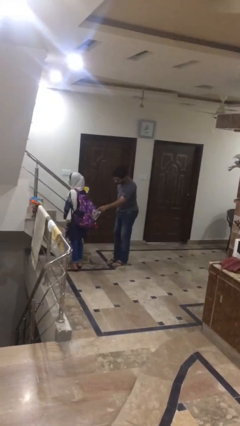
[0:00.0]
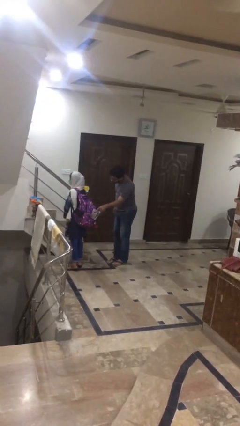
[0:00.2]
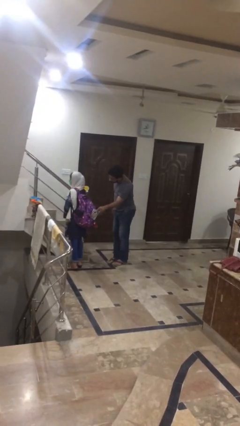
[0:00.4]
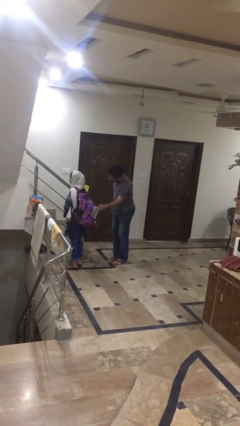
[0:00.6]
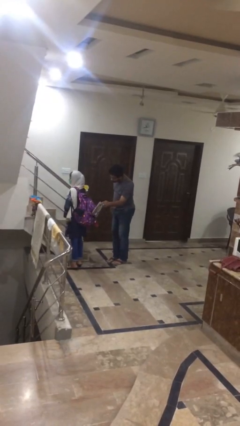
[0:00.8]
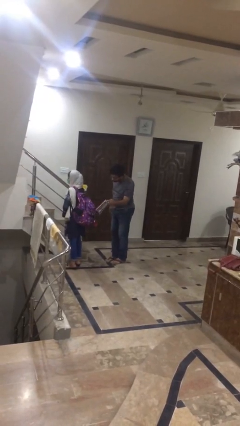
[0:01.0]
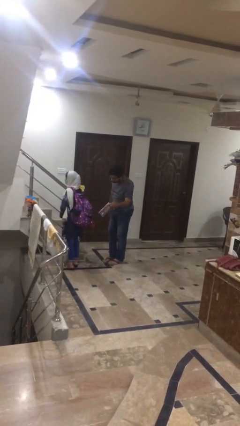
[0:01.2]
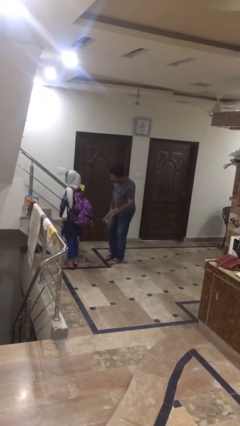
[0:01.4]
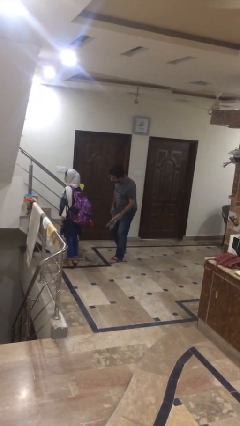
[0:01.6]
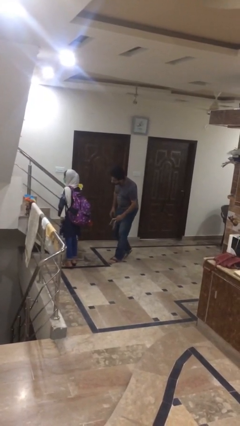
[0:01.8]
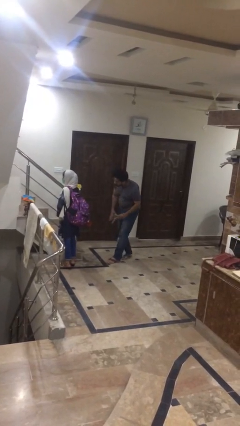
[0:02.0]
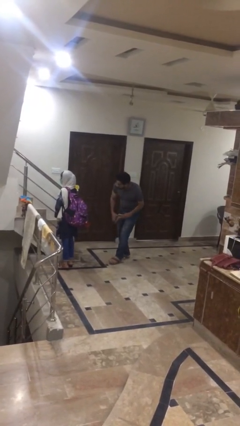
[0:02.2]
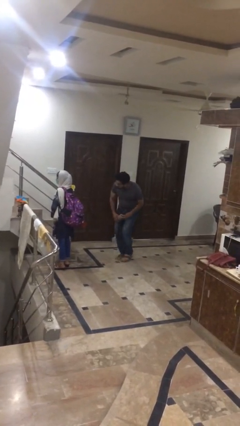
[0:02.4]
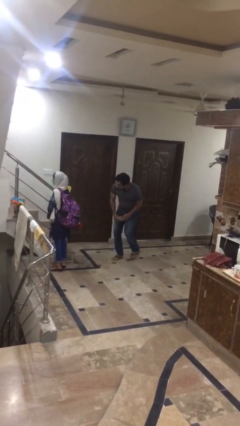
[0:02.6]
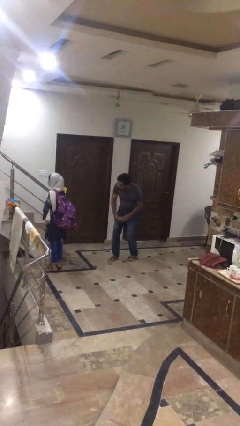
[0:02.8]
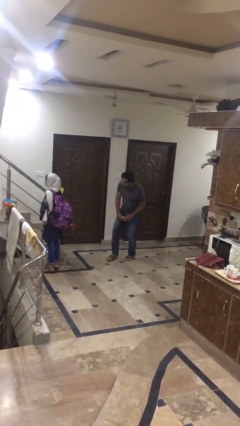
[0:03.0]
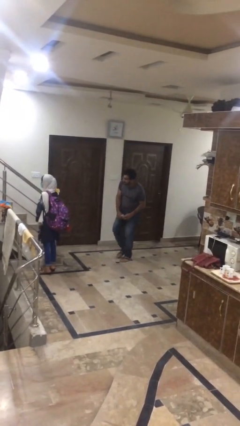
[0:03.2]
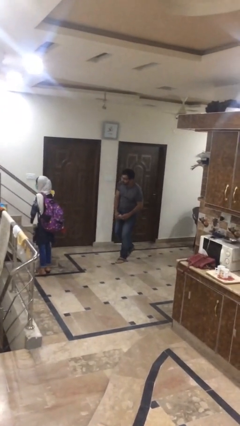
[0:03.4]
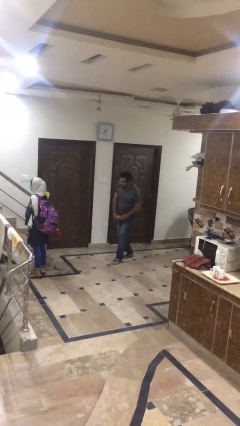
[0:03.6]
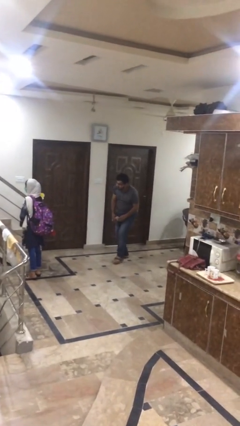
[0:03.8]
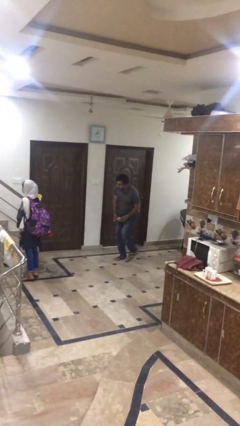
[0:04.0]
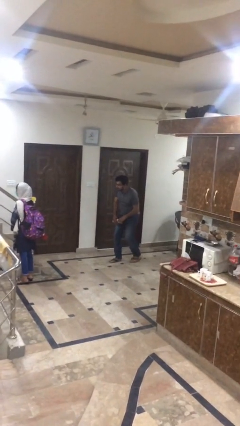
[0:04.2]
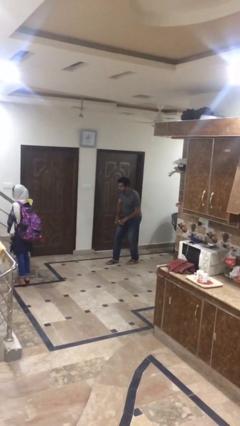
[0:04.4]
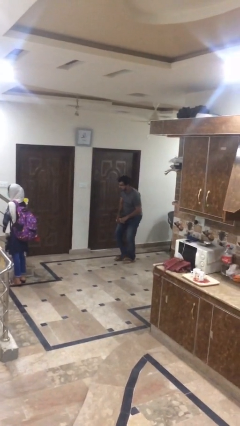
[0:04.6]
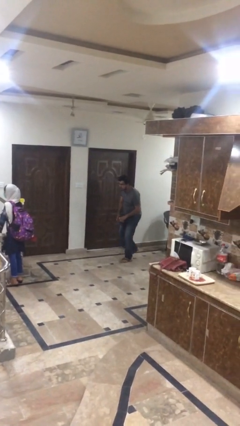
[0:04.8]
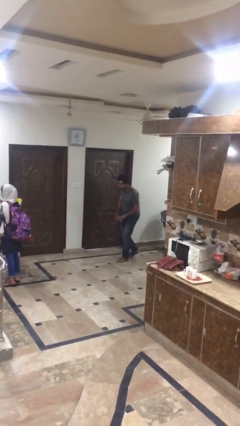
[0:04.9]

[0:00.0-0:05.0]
person steals object from person

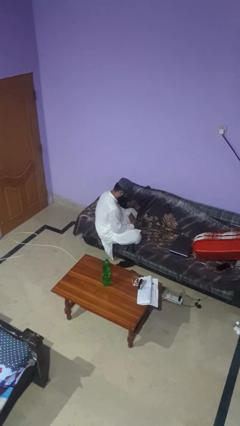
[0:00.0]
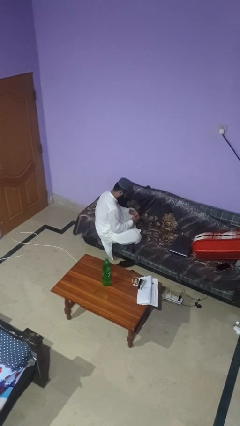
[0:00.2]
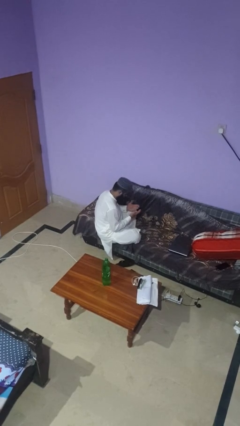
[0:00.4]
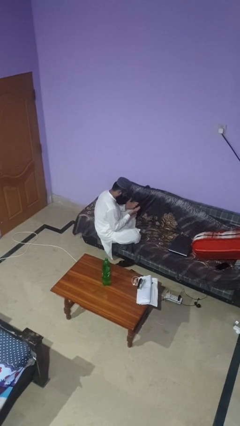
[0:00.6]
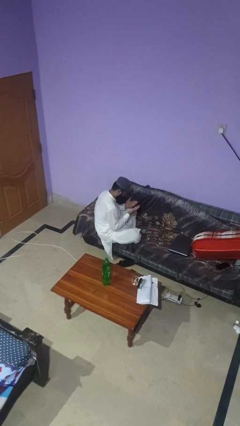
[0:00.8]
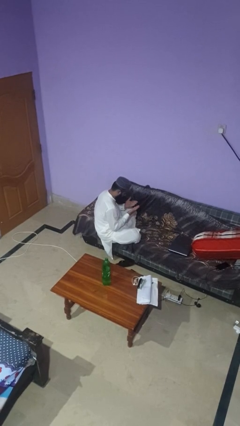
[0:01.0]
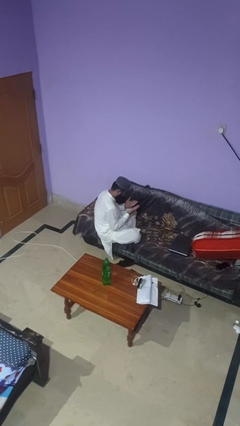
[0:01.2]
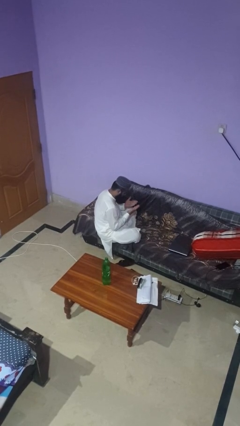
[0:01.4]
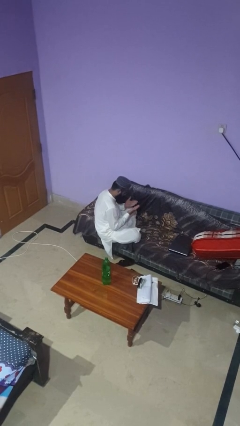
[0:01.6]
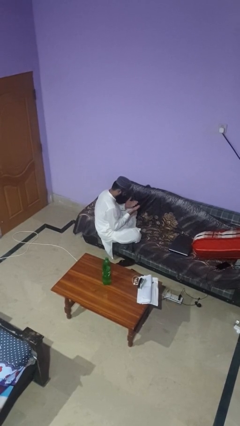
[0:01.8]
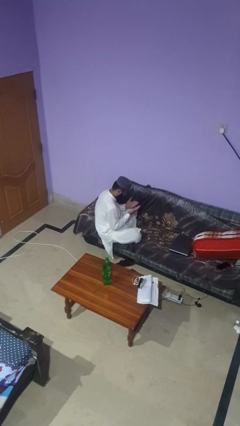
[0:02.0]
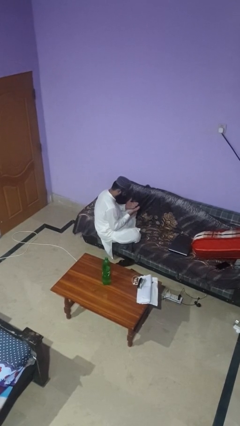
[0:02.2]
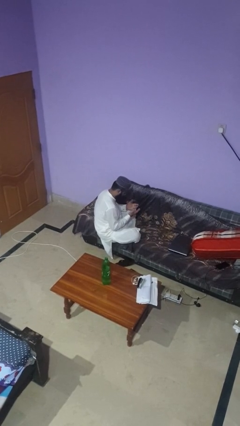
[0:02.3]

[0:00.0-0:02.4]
person looks at hands in lap

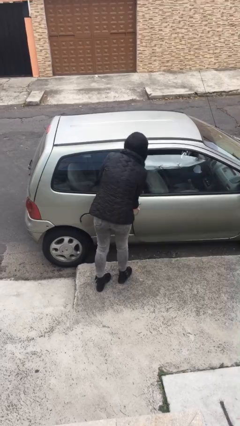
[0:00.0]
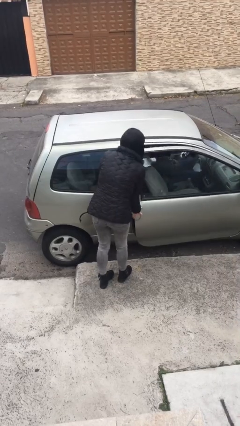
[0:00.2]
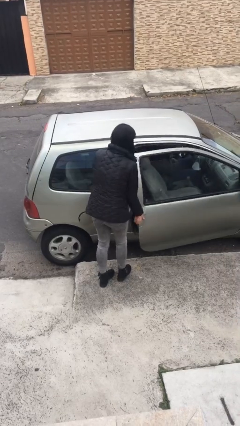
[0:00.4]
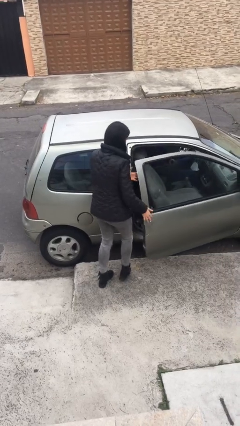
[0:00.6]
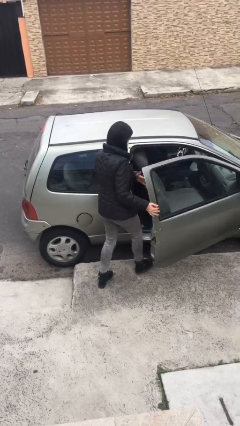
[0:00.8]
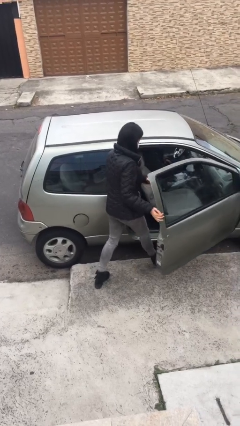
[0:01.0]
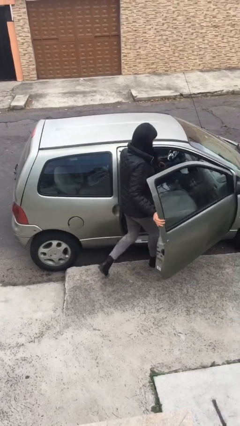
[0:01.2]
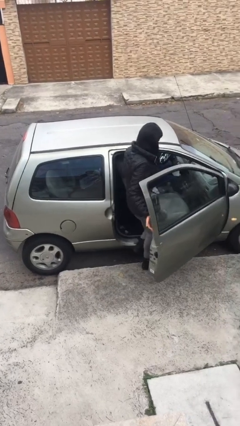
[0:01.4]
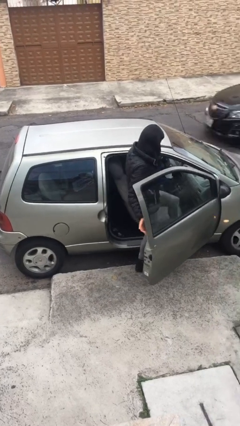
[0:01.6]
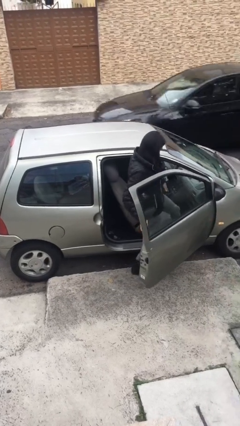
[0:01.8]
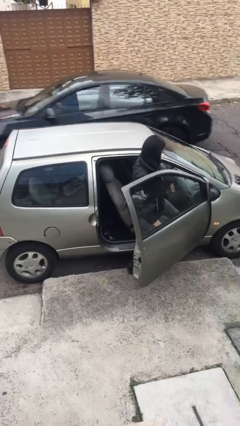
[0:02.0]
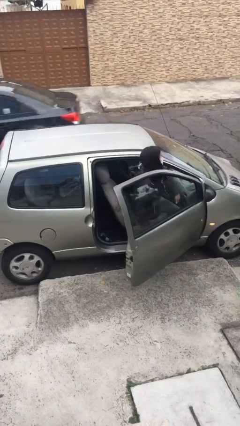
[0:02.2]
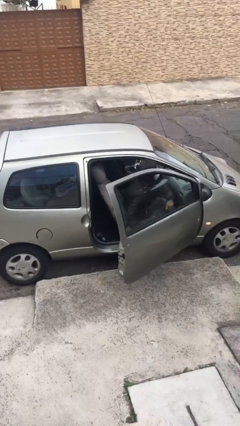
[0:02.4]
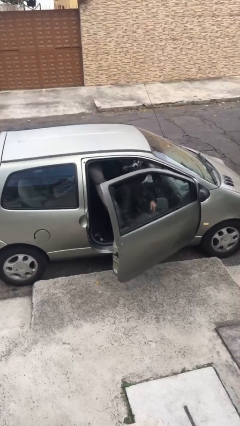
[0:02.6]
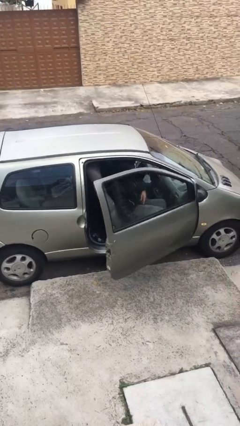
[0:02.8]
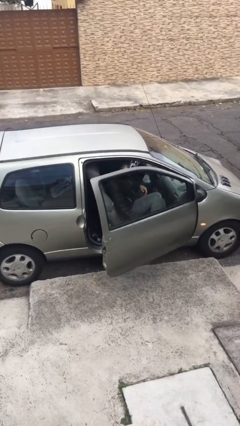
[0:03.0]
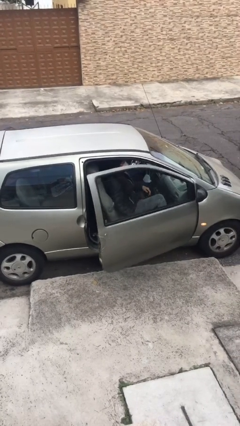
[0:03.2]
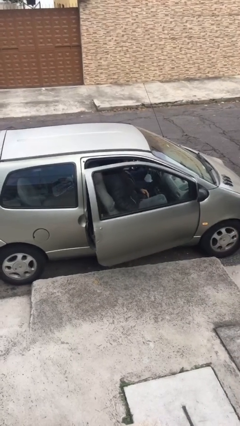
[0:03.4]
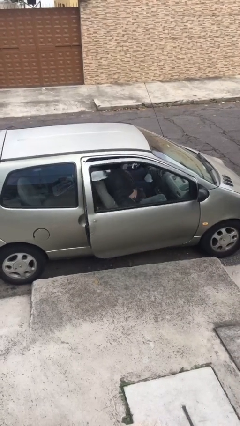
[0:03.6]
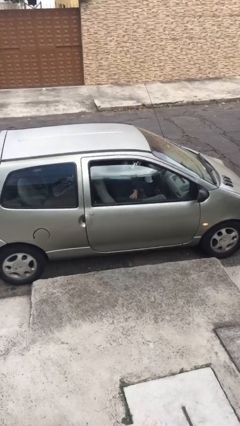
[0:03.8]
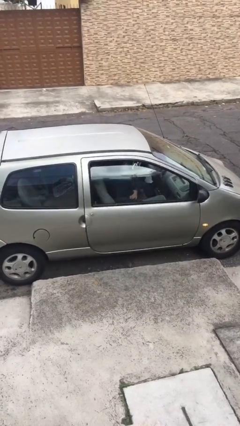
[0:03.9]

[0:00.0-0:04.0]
car picks up person

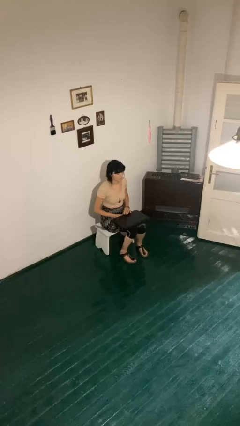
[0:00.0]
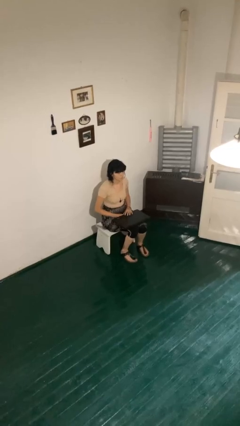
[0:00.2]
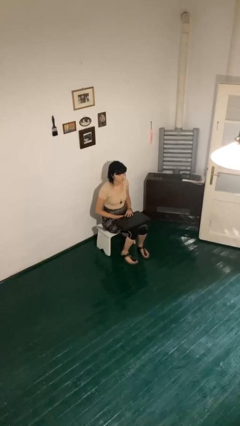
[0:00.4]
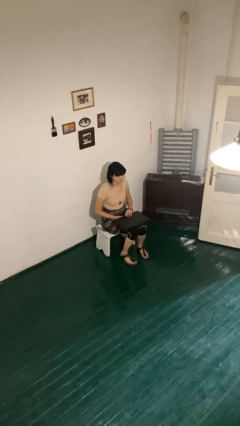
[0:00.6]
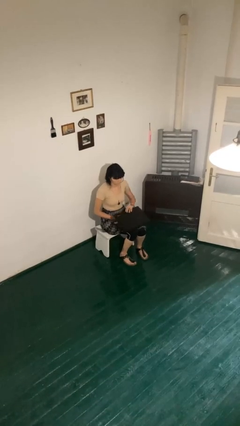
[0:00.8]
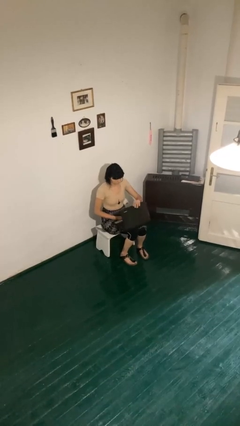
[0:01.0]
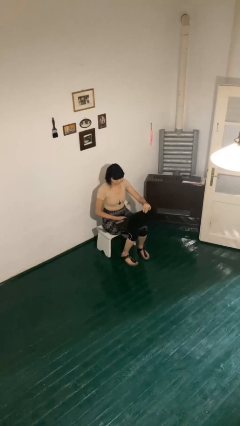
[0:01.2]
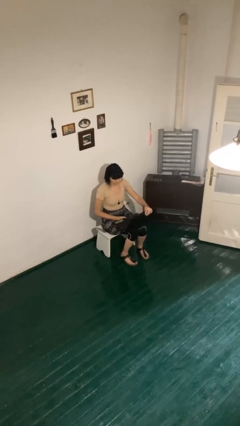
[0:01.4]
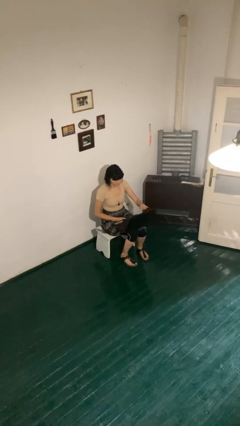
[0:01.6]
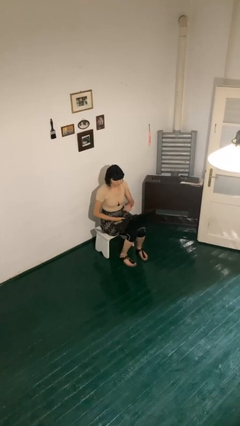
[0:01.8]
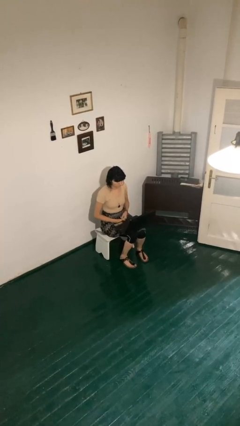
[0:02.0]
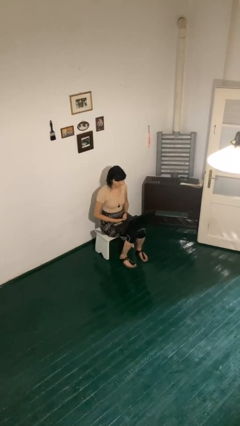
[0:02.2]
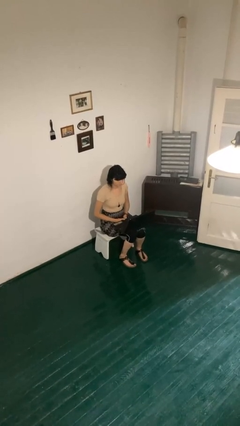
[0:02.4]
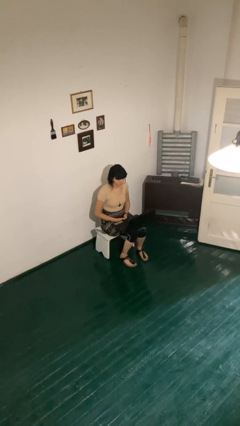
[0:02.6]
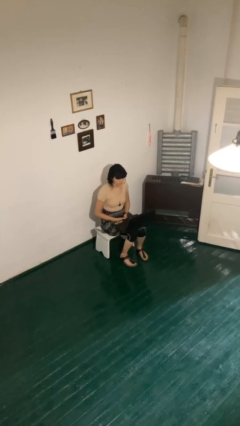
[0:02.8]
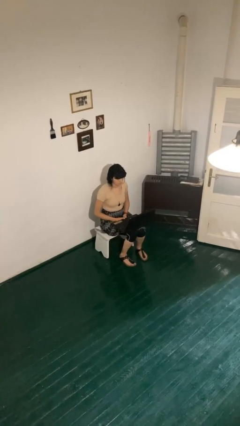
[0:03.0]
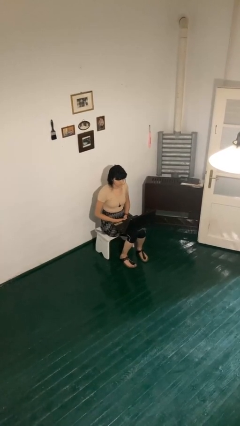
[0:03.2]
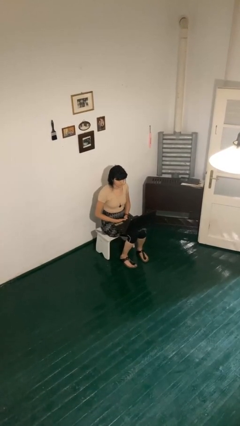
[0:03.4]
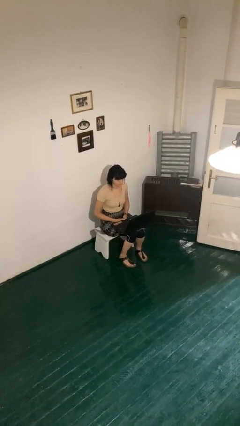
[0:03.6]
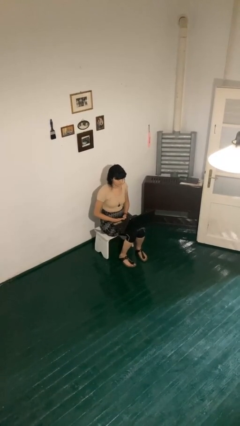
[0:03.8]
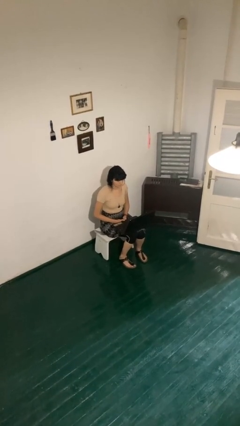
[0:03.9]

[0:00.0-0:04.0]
person opens laptop

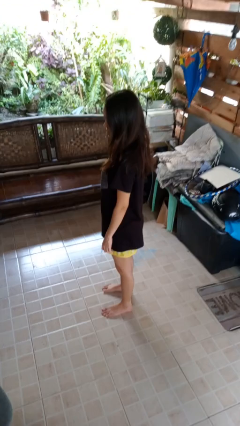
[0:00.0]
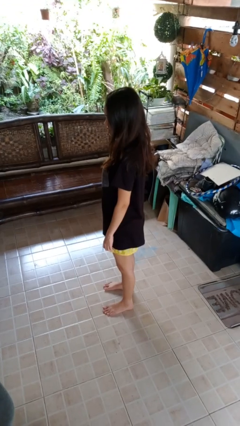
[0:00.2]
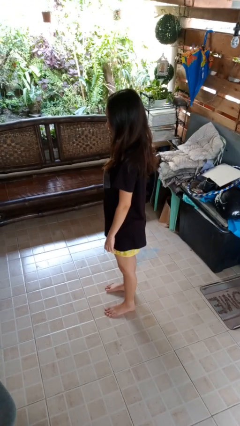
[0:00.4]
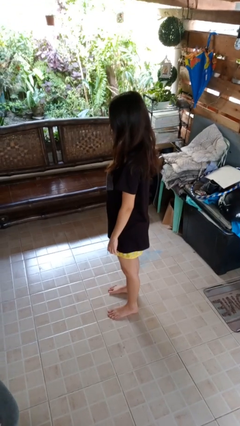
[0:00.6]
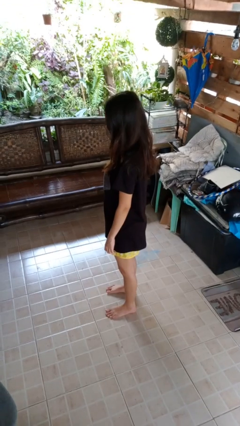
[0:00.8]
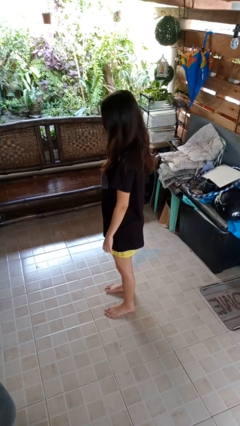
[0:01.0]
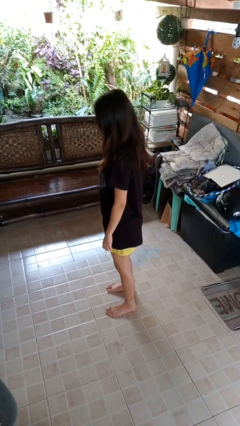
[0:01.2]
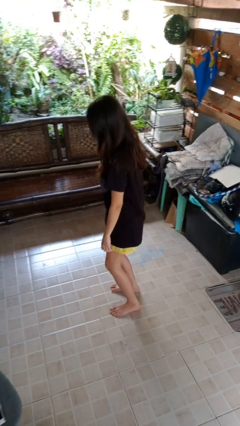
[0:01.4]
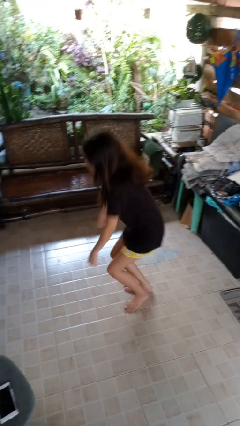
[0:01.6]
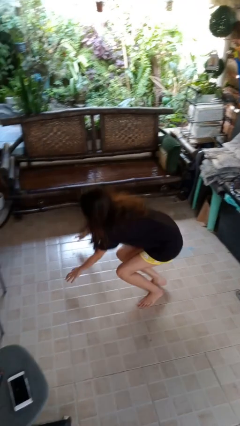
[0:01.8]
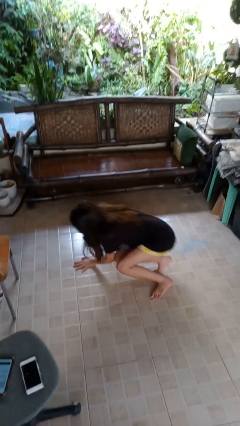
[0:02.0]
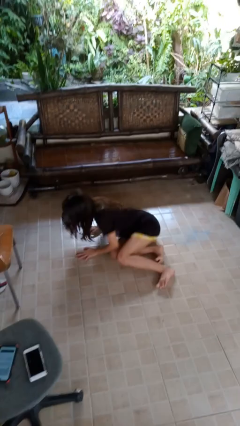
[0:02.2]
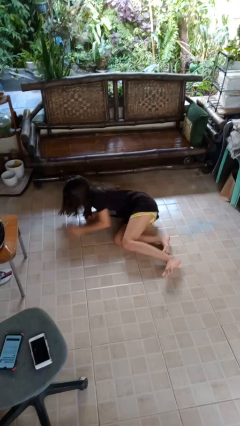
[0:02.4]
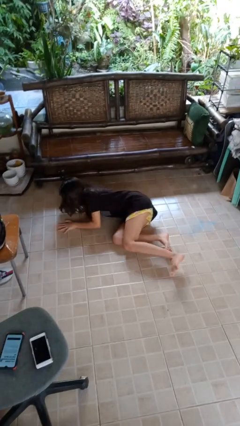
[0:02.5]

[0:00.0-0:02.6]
person falls while standing
